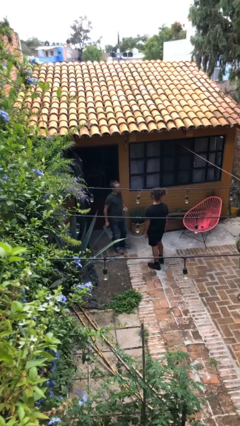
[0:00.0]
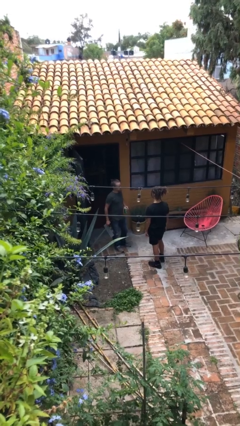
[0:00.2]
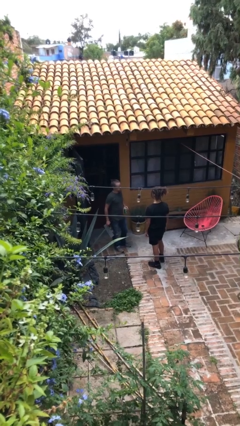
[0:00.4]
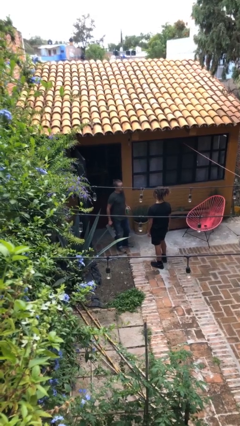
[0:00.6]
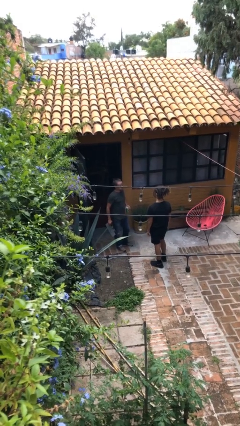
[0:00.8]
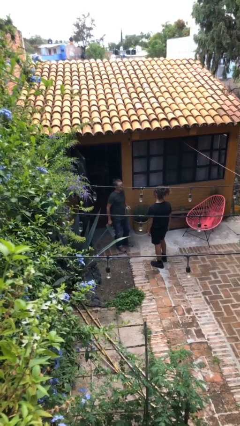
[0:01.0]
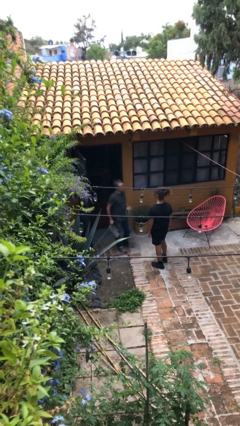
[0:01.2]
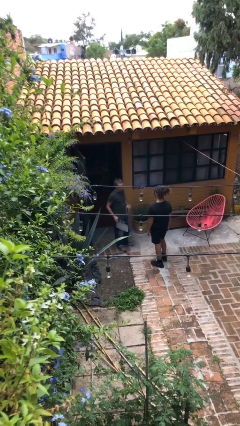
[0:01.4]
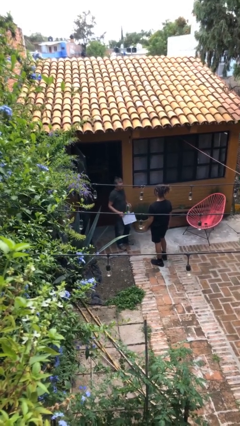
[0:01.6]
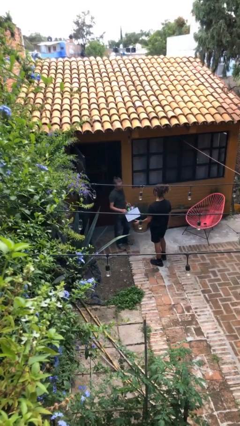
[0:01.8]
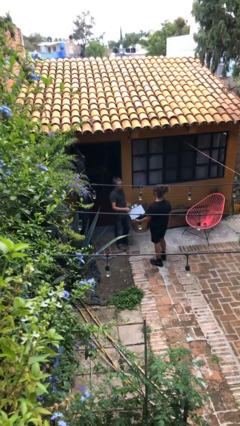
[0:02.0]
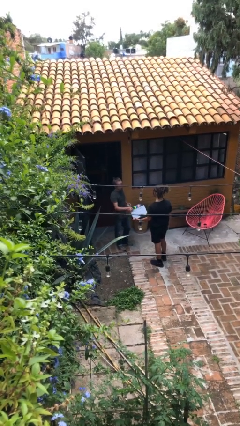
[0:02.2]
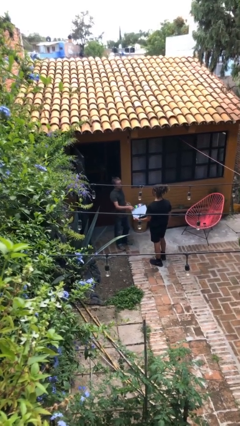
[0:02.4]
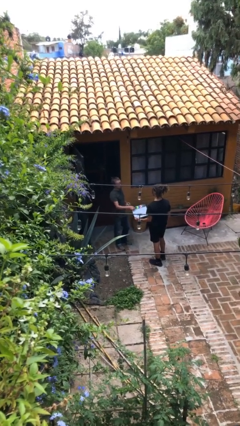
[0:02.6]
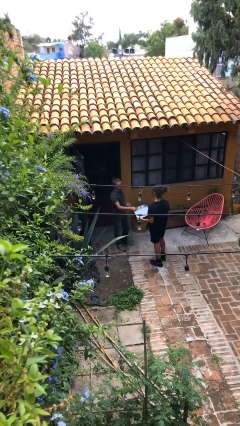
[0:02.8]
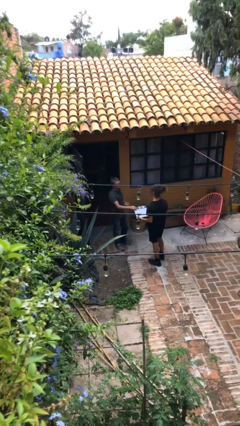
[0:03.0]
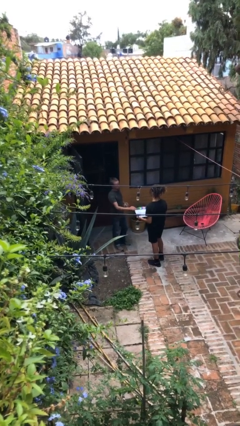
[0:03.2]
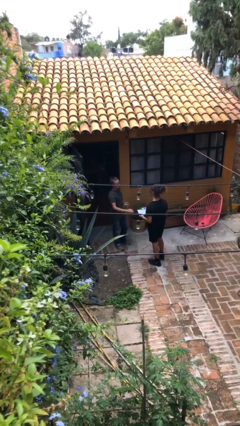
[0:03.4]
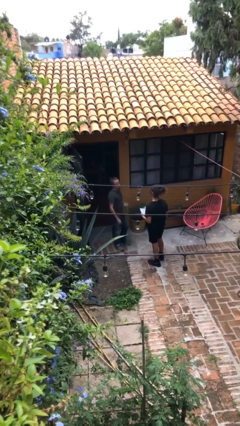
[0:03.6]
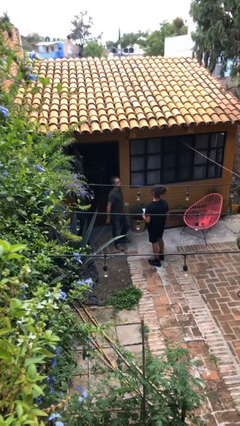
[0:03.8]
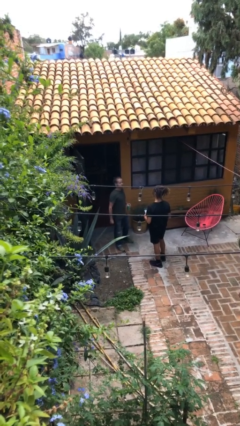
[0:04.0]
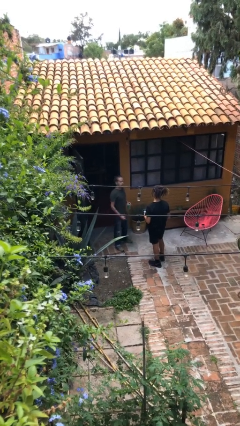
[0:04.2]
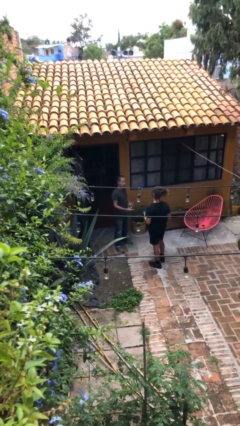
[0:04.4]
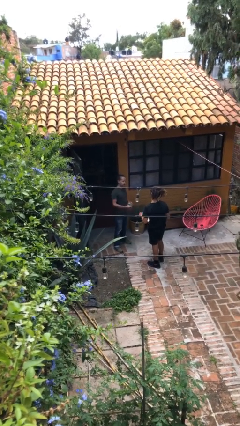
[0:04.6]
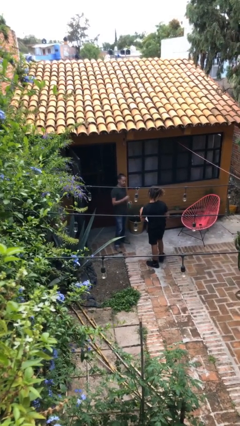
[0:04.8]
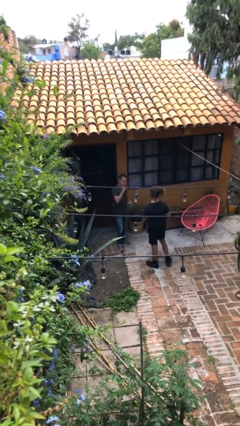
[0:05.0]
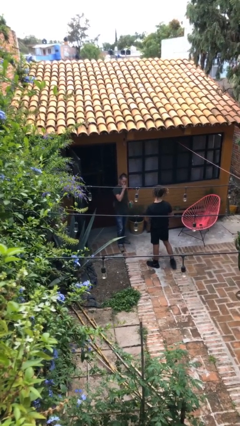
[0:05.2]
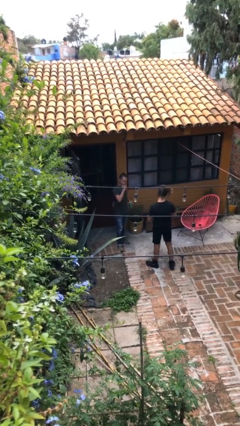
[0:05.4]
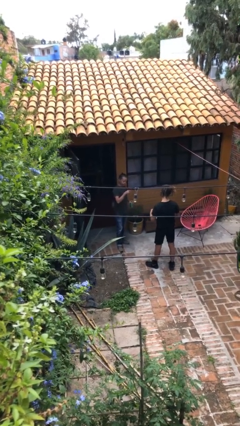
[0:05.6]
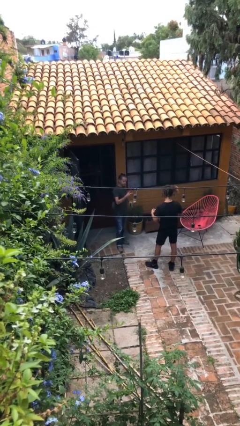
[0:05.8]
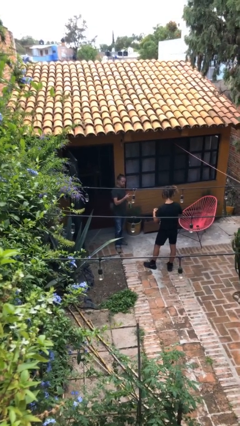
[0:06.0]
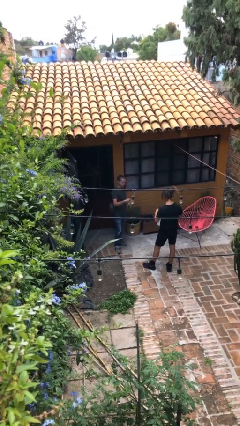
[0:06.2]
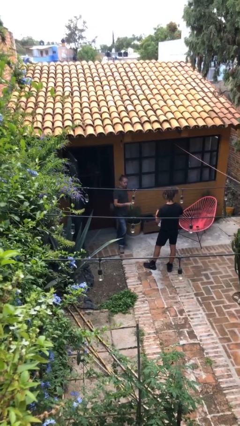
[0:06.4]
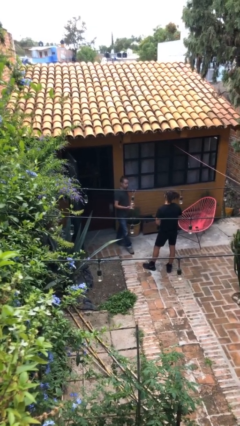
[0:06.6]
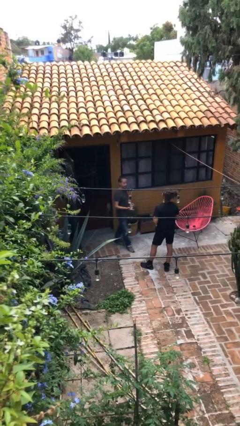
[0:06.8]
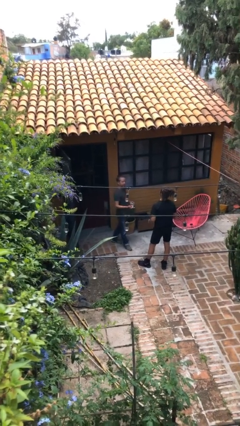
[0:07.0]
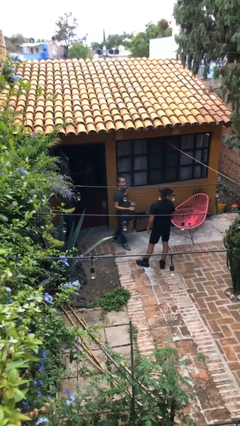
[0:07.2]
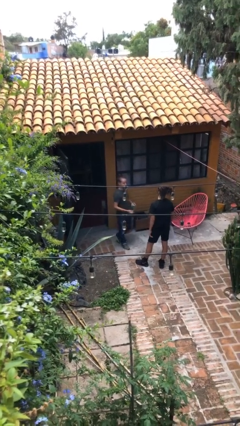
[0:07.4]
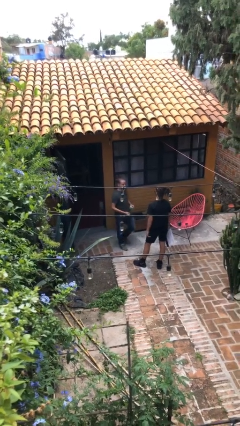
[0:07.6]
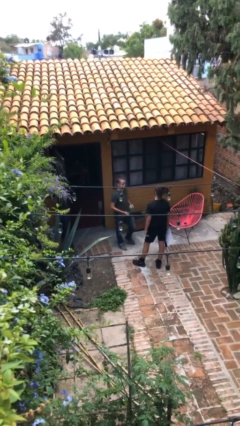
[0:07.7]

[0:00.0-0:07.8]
person transfers object to person

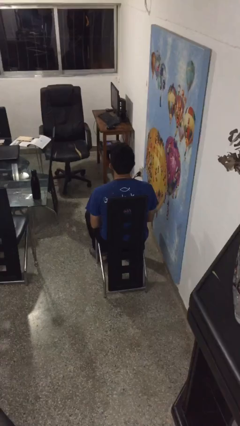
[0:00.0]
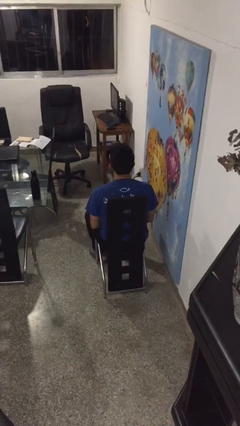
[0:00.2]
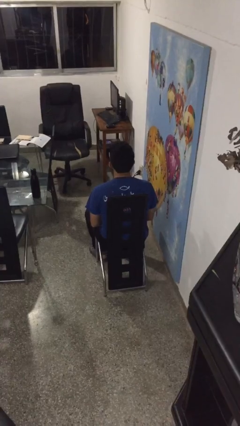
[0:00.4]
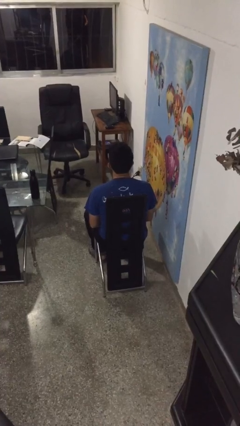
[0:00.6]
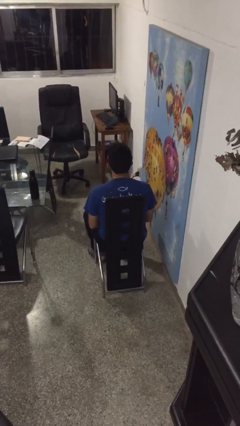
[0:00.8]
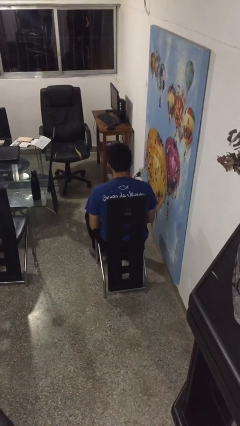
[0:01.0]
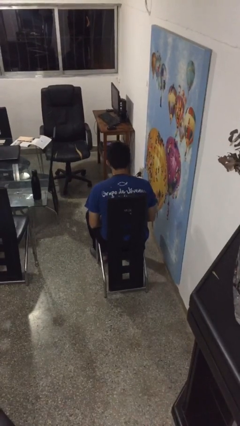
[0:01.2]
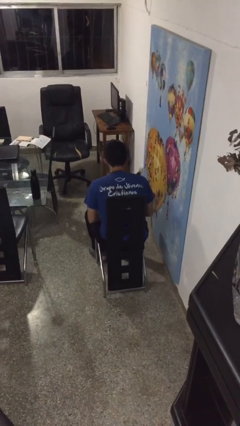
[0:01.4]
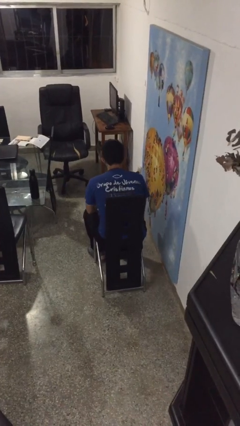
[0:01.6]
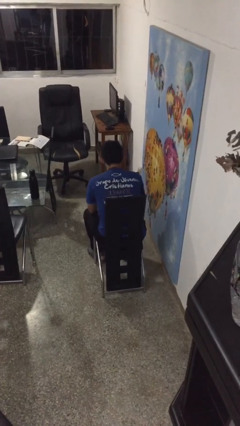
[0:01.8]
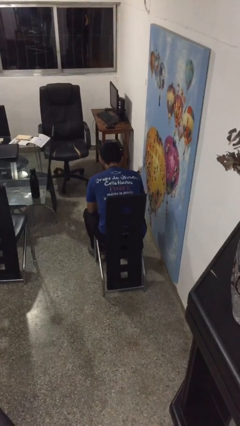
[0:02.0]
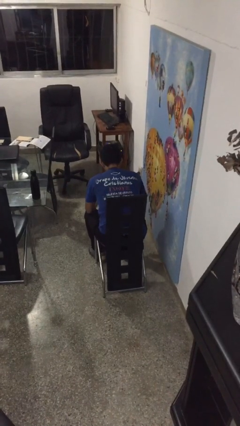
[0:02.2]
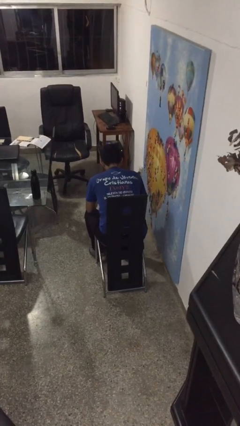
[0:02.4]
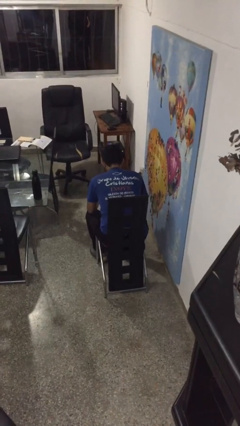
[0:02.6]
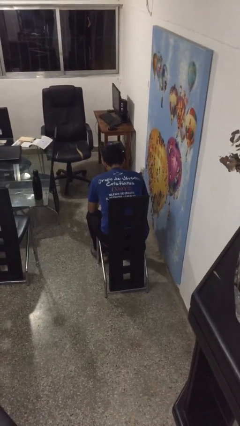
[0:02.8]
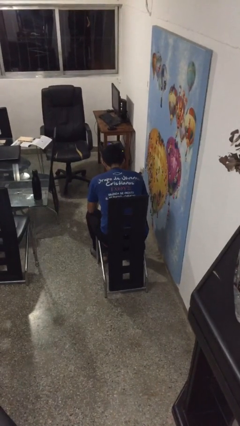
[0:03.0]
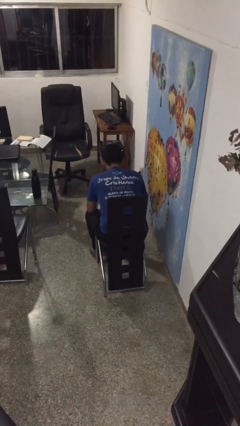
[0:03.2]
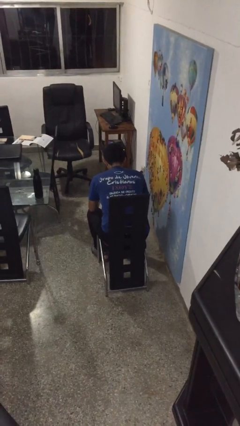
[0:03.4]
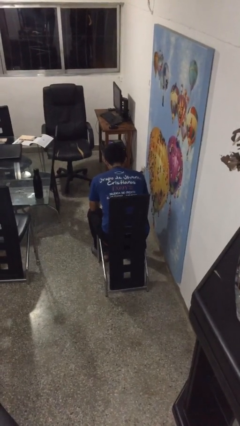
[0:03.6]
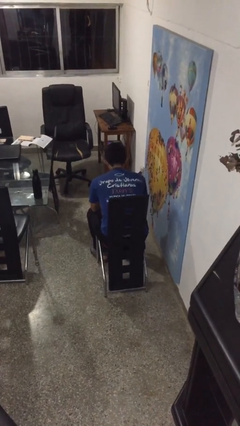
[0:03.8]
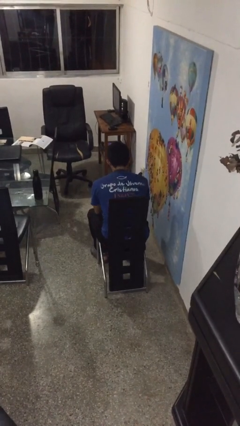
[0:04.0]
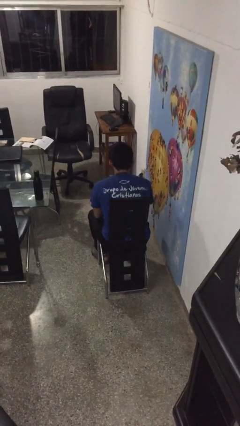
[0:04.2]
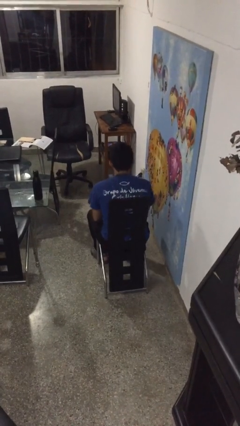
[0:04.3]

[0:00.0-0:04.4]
person looks at hands in lap

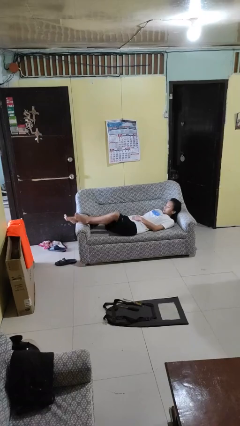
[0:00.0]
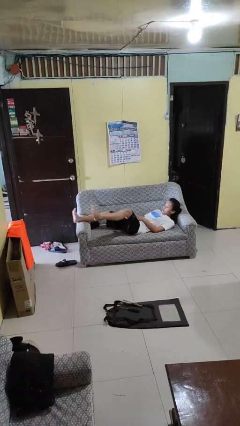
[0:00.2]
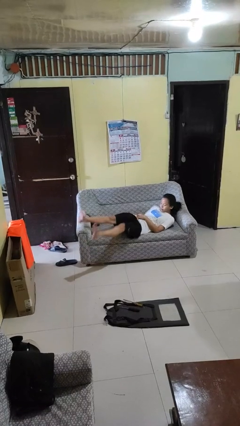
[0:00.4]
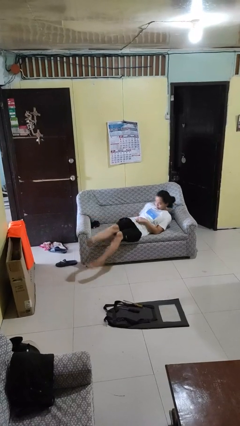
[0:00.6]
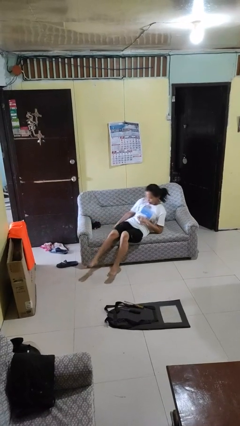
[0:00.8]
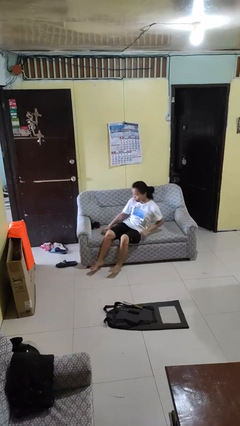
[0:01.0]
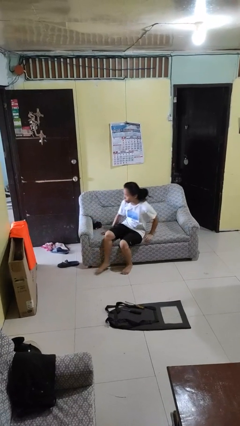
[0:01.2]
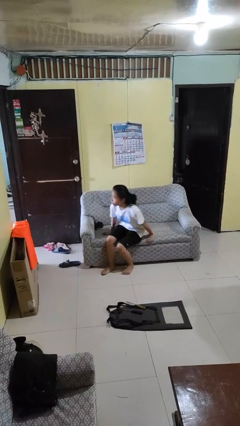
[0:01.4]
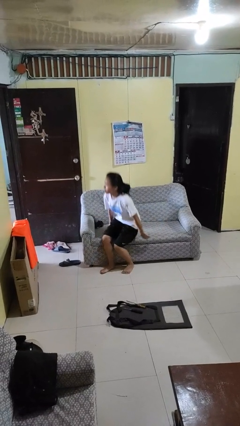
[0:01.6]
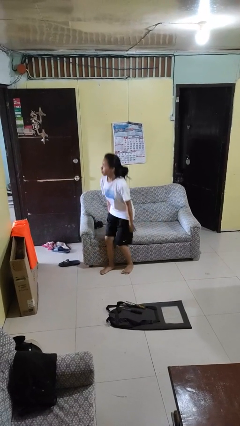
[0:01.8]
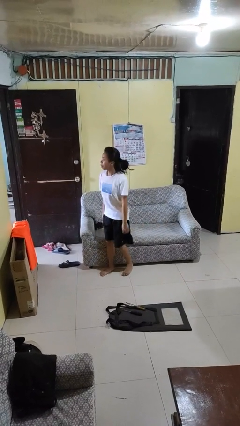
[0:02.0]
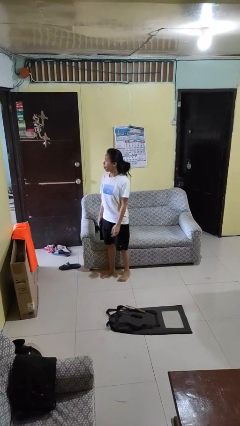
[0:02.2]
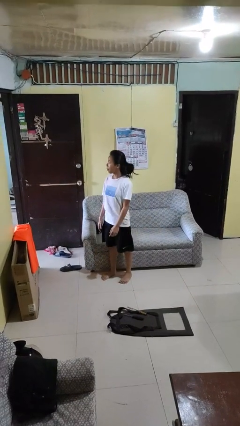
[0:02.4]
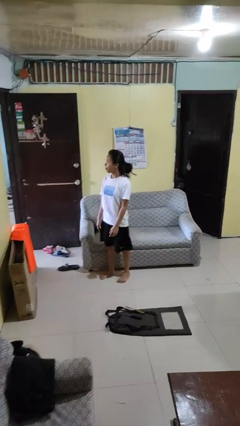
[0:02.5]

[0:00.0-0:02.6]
person stands up

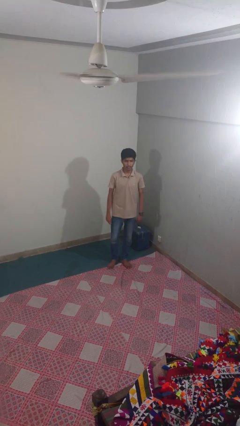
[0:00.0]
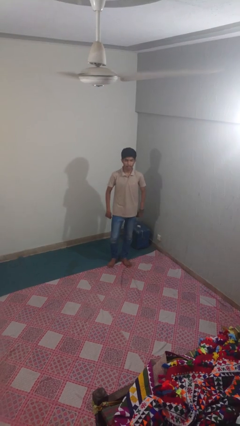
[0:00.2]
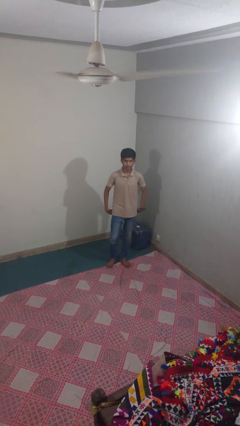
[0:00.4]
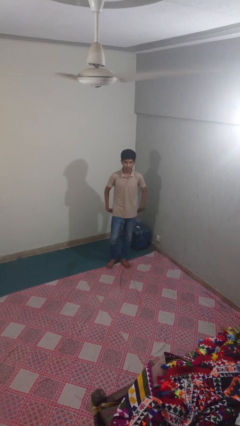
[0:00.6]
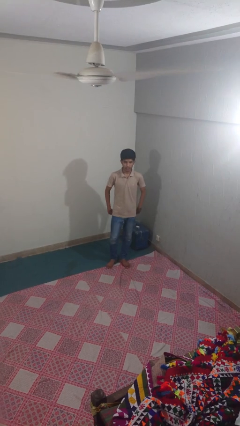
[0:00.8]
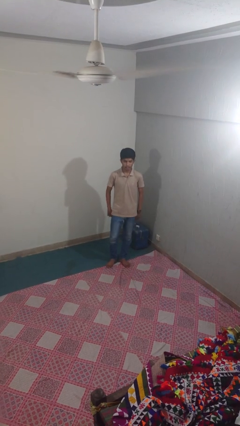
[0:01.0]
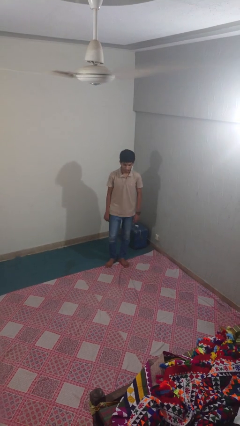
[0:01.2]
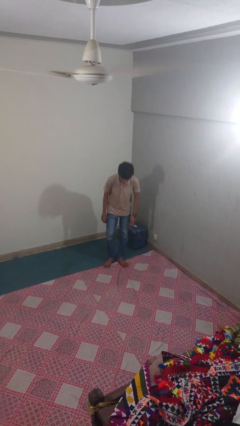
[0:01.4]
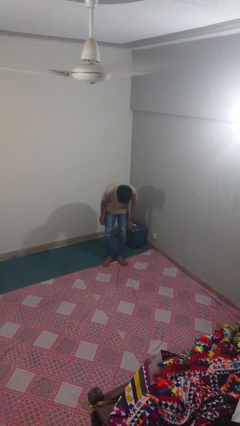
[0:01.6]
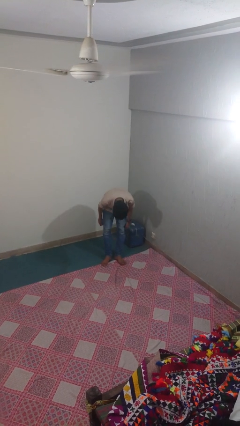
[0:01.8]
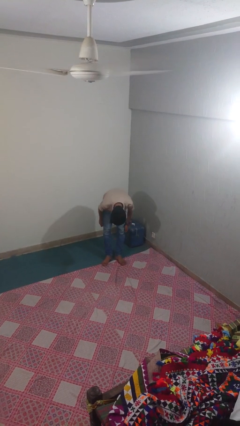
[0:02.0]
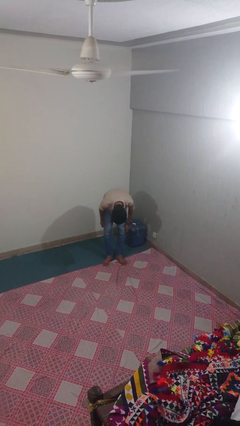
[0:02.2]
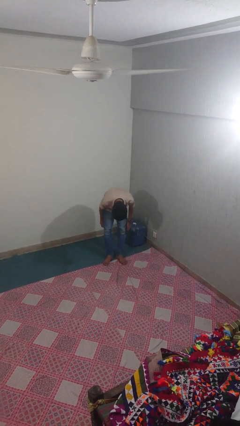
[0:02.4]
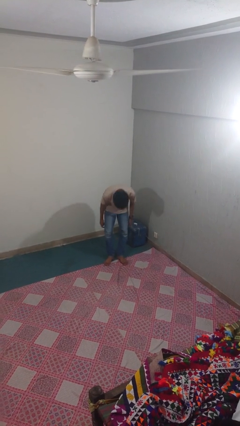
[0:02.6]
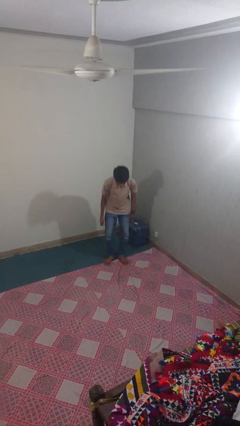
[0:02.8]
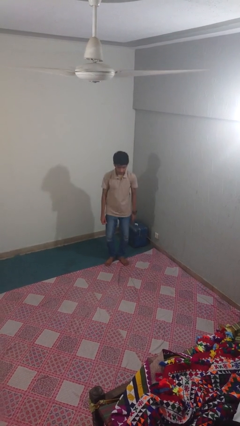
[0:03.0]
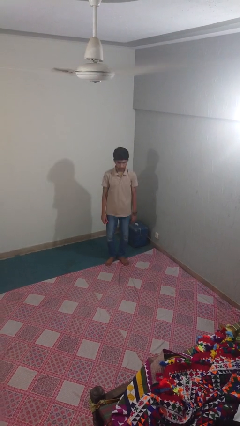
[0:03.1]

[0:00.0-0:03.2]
person bows
